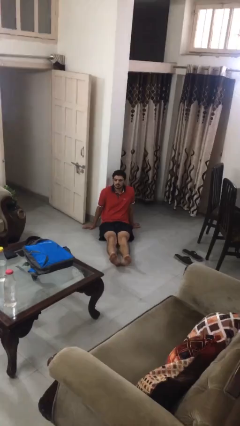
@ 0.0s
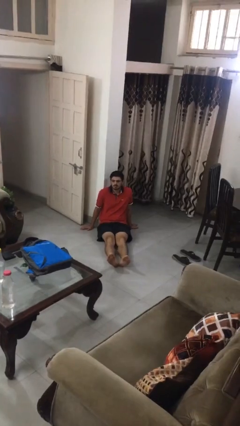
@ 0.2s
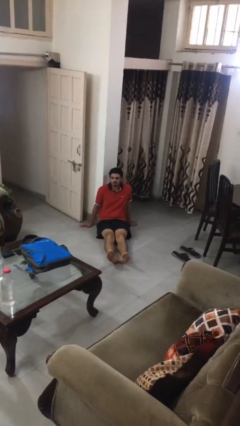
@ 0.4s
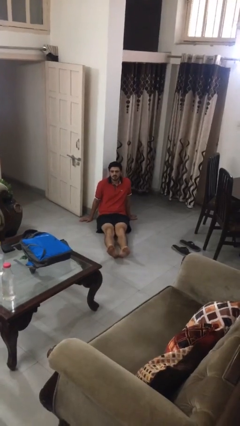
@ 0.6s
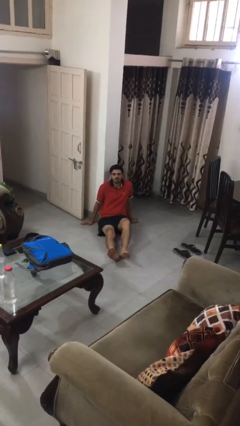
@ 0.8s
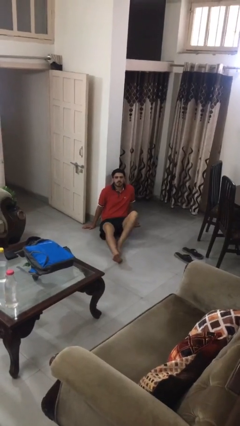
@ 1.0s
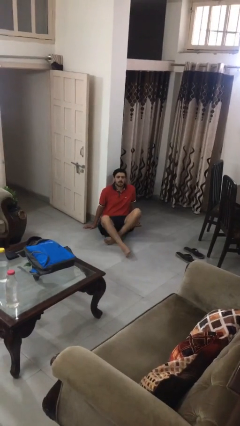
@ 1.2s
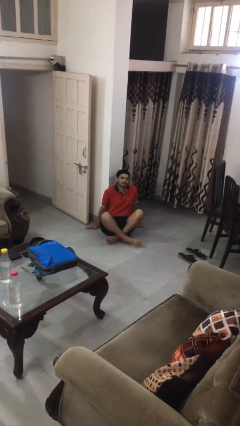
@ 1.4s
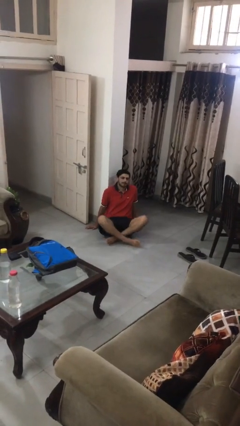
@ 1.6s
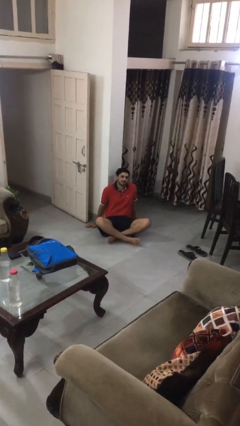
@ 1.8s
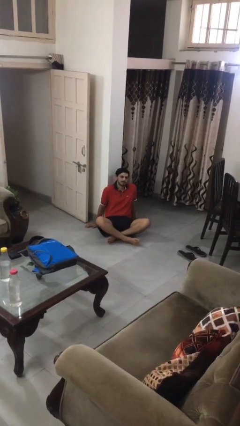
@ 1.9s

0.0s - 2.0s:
person crosses legs

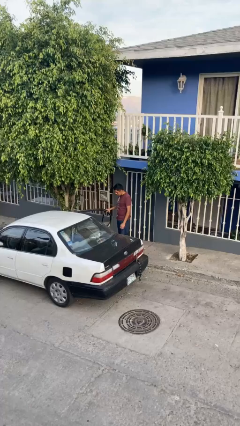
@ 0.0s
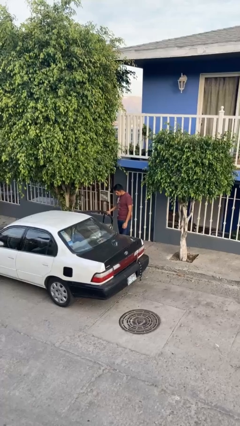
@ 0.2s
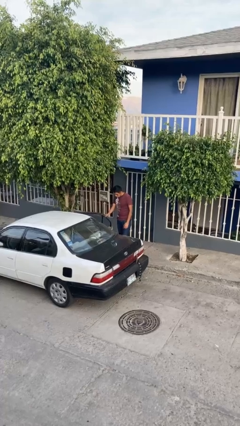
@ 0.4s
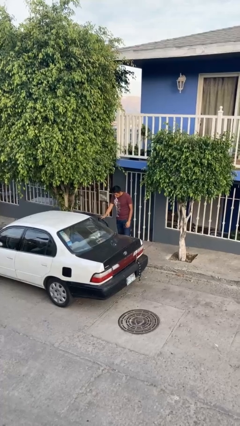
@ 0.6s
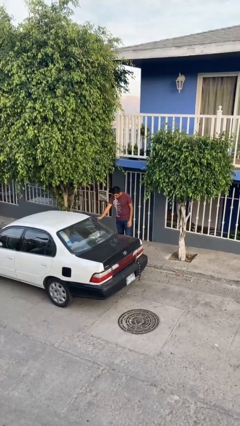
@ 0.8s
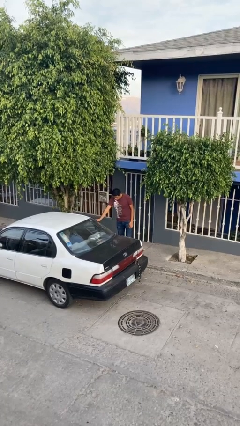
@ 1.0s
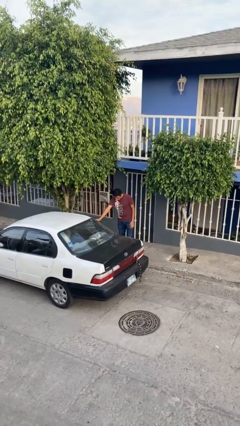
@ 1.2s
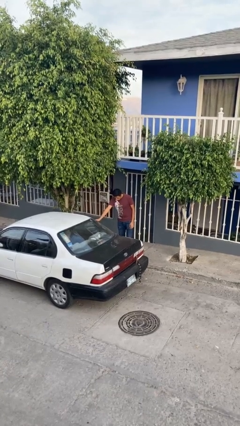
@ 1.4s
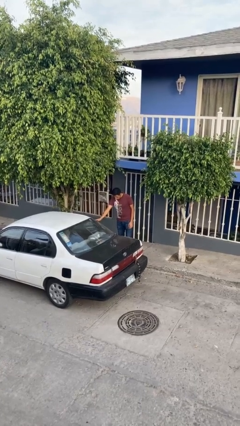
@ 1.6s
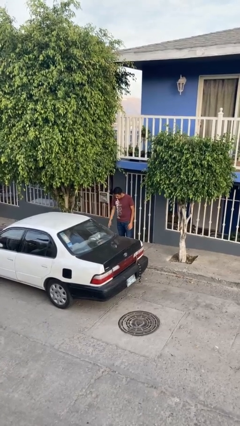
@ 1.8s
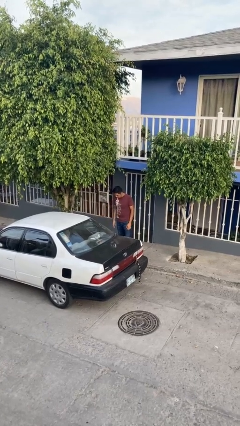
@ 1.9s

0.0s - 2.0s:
person closes car door

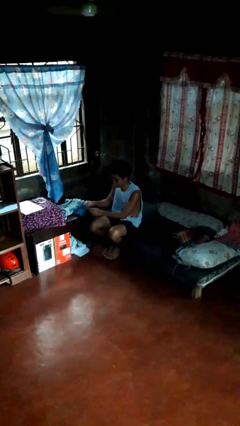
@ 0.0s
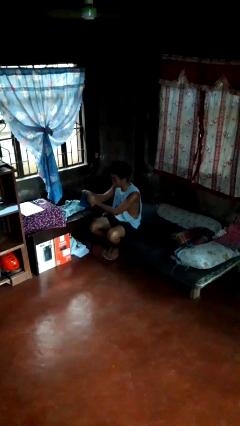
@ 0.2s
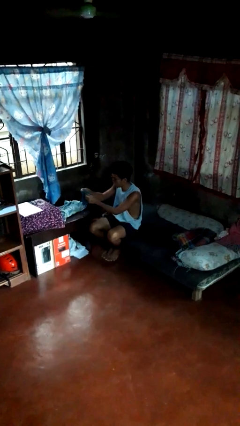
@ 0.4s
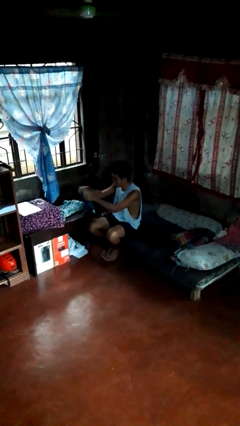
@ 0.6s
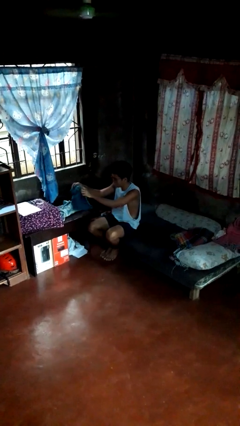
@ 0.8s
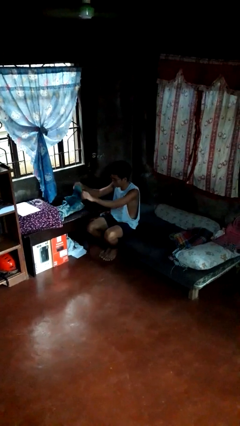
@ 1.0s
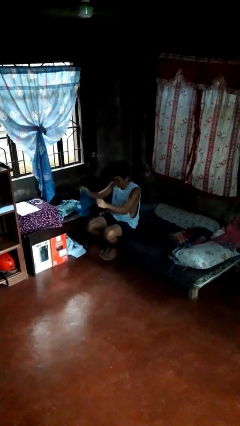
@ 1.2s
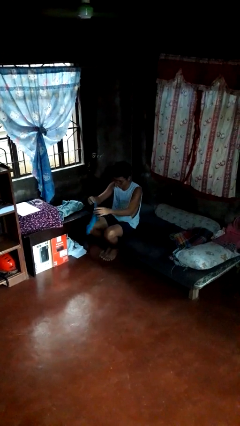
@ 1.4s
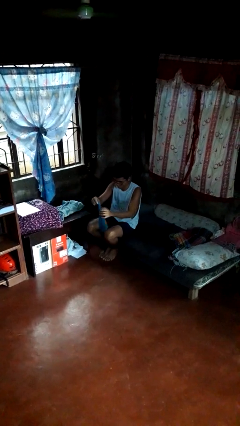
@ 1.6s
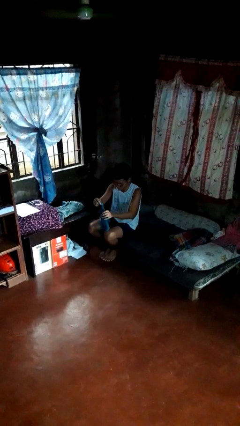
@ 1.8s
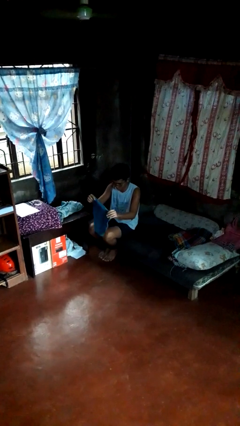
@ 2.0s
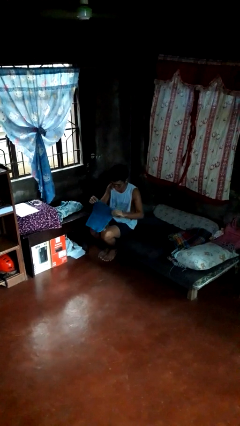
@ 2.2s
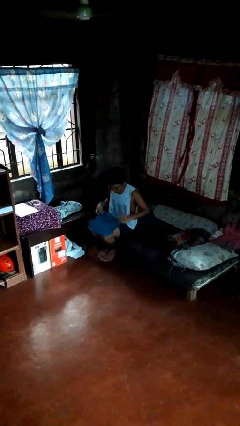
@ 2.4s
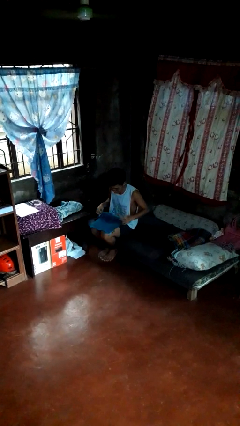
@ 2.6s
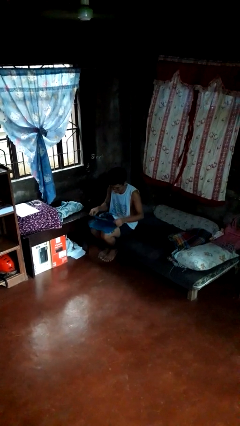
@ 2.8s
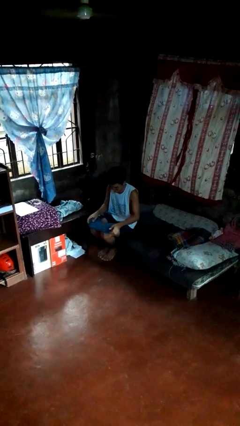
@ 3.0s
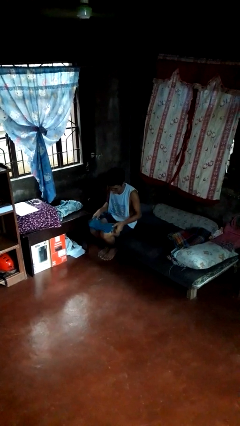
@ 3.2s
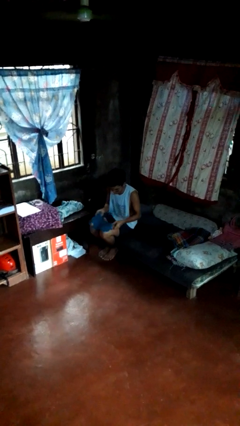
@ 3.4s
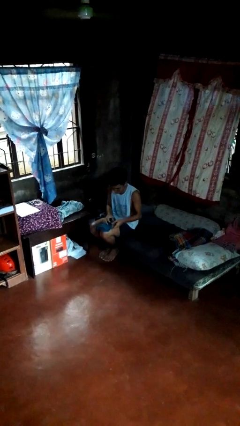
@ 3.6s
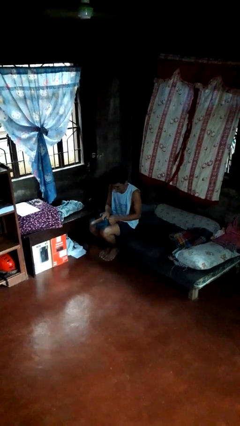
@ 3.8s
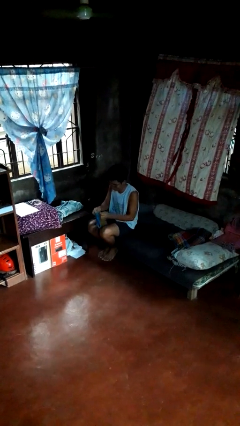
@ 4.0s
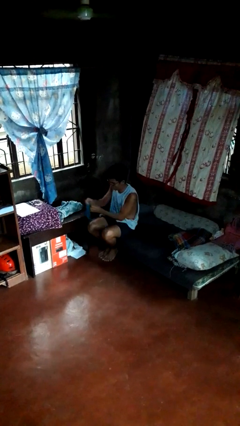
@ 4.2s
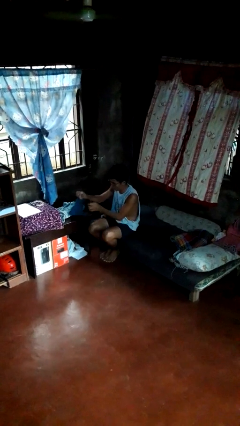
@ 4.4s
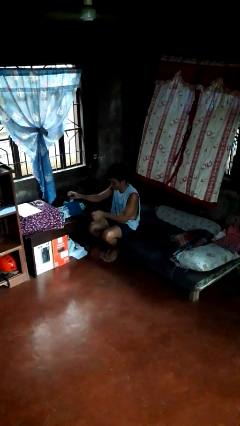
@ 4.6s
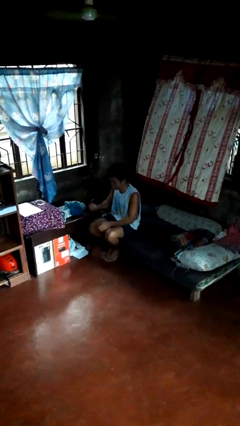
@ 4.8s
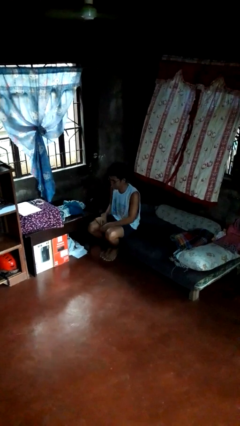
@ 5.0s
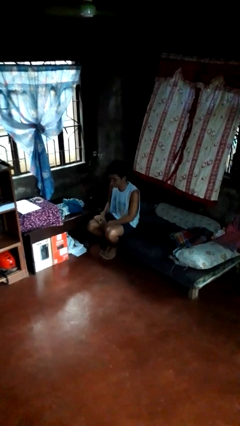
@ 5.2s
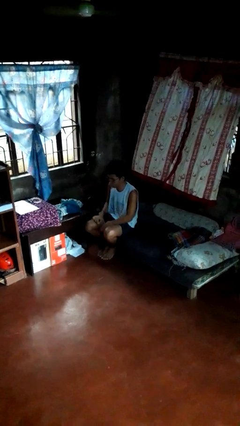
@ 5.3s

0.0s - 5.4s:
person folds towel

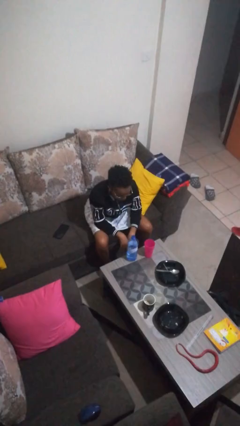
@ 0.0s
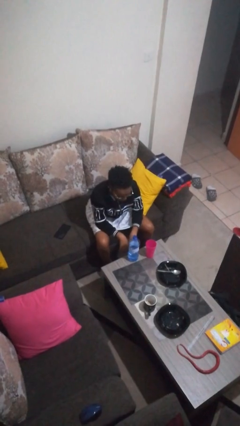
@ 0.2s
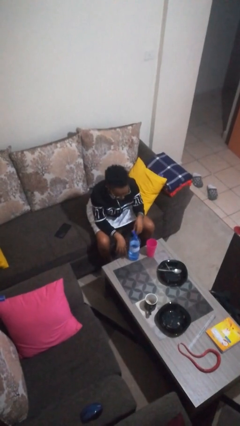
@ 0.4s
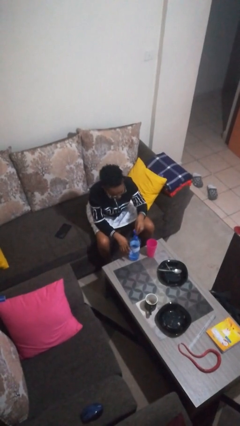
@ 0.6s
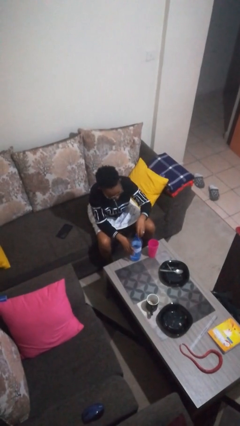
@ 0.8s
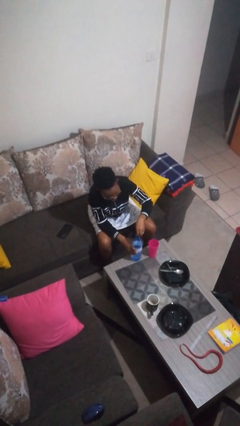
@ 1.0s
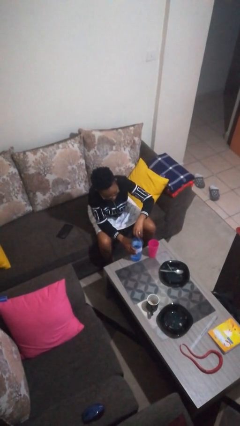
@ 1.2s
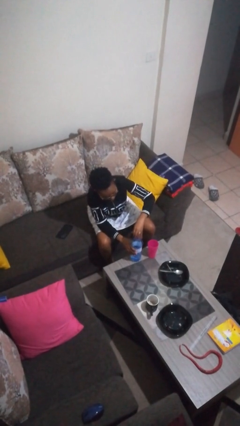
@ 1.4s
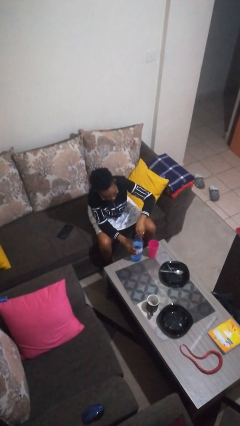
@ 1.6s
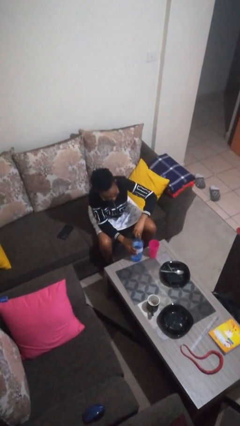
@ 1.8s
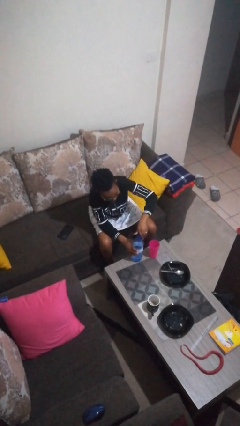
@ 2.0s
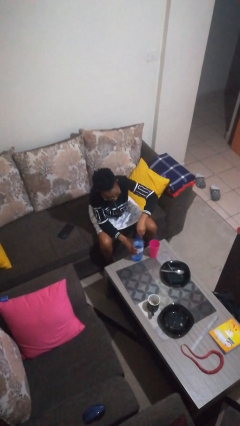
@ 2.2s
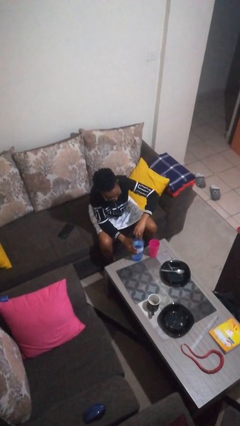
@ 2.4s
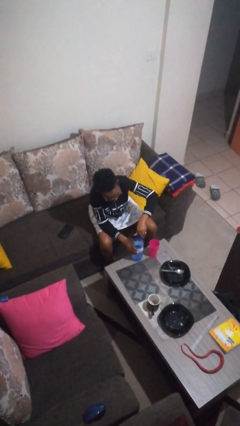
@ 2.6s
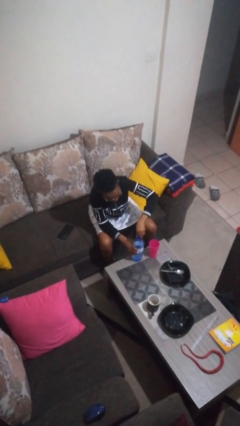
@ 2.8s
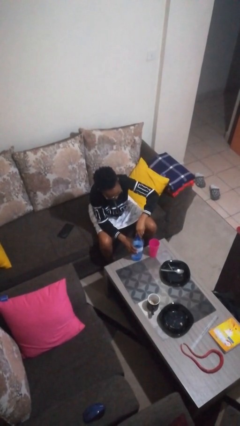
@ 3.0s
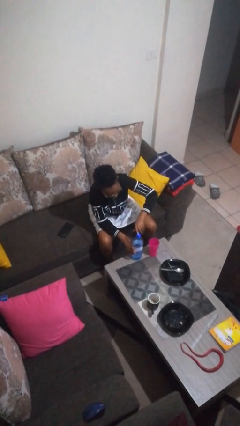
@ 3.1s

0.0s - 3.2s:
person screws lid to bottle

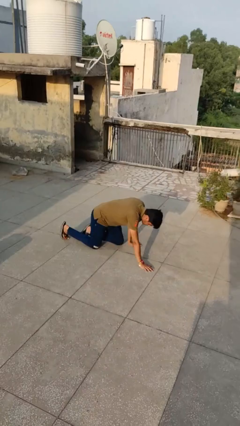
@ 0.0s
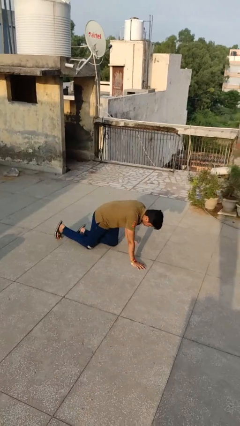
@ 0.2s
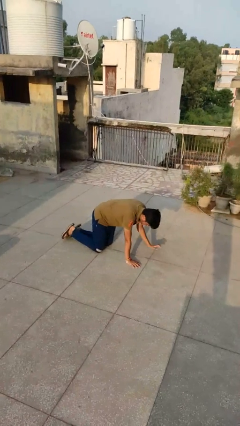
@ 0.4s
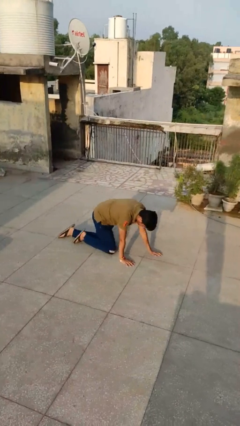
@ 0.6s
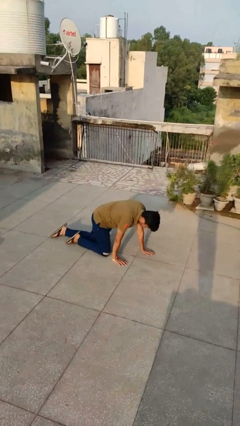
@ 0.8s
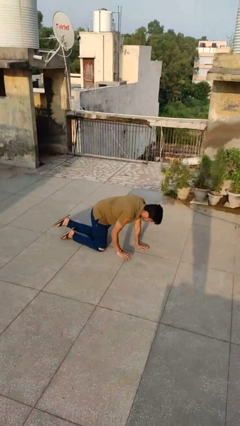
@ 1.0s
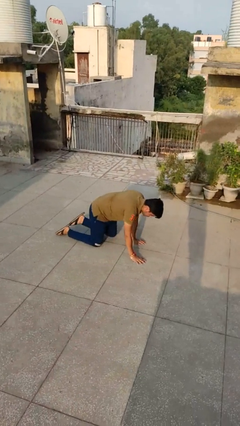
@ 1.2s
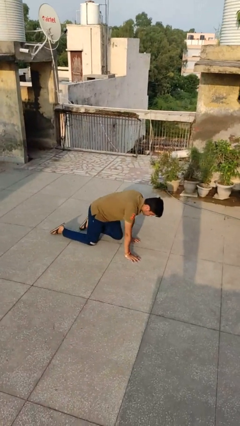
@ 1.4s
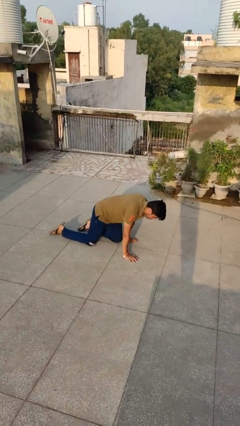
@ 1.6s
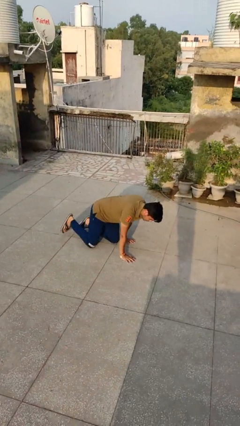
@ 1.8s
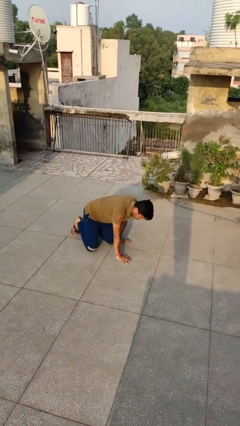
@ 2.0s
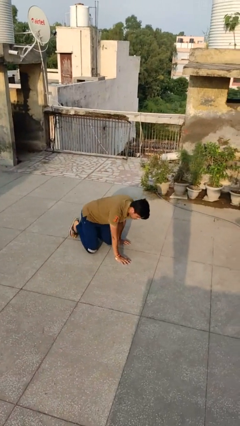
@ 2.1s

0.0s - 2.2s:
person crawls

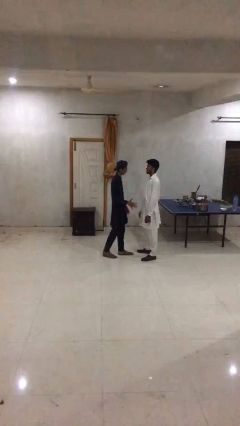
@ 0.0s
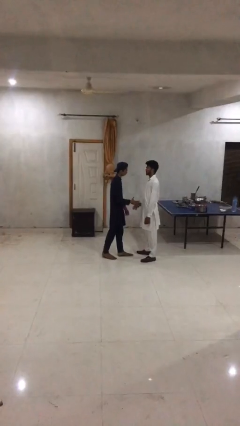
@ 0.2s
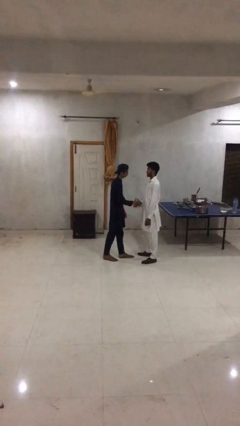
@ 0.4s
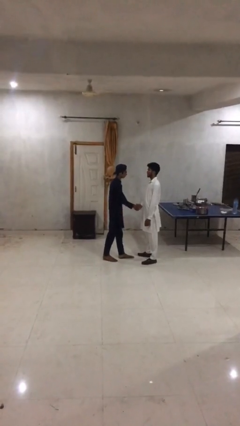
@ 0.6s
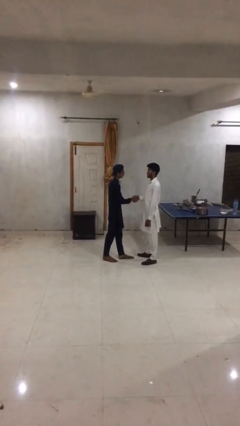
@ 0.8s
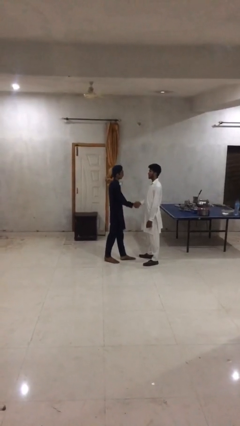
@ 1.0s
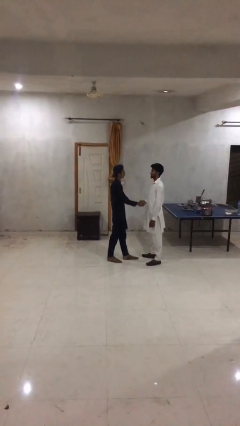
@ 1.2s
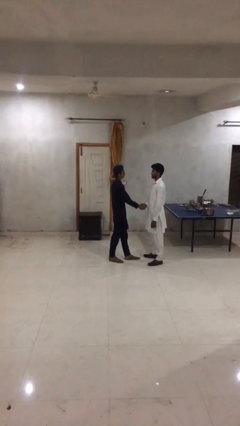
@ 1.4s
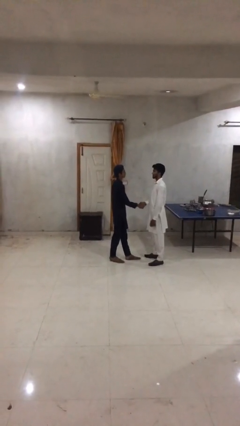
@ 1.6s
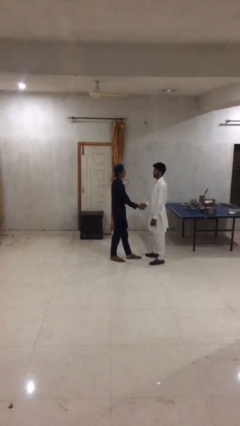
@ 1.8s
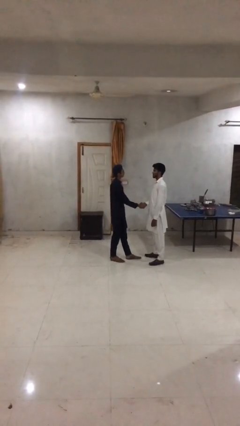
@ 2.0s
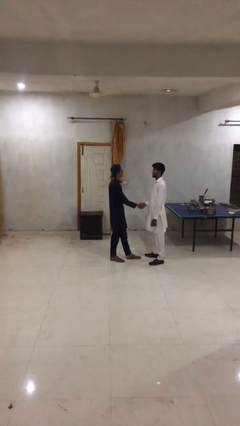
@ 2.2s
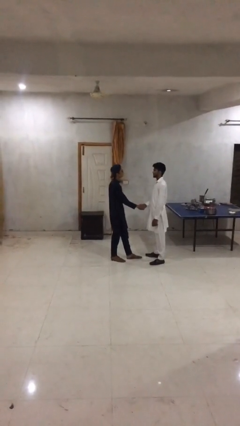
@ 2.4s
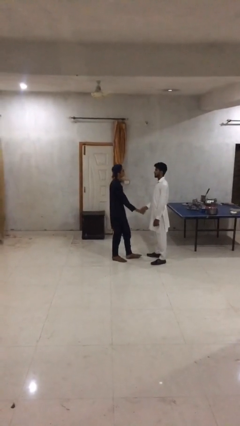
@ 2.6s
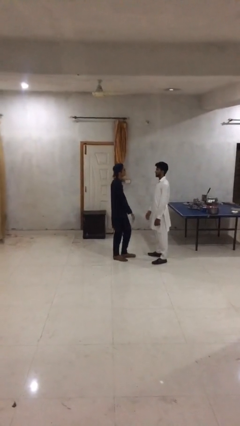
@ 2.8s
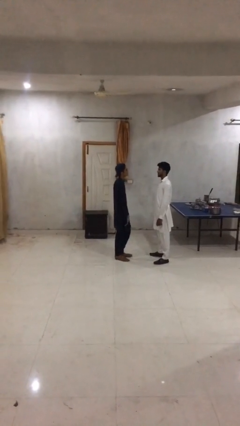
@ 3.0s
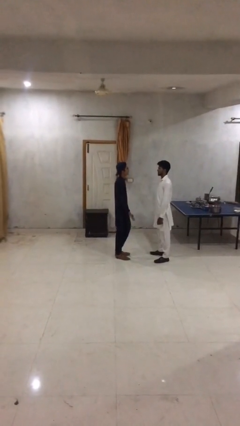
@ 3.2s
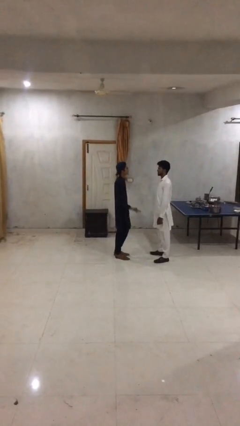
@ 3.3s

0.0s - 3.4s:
person shakes hand
